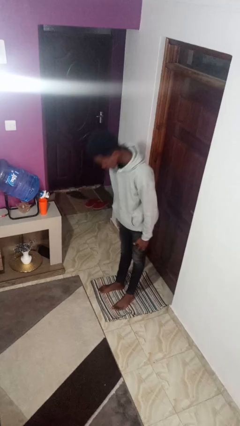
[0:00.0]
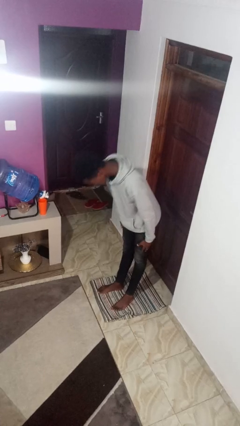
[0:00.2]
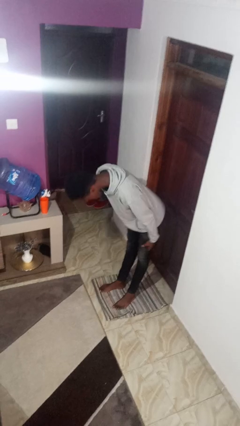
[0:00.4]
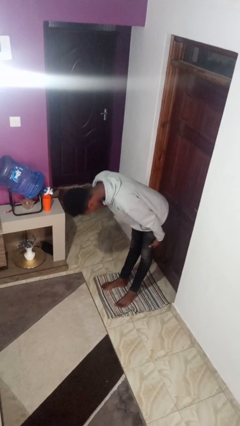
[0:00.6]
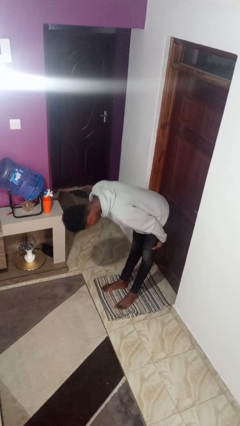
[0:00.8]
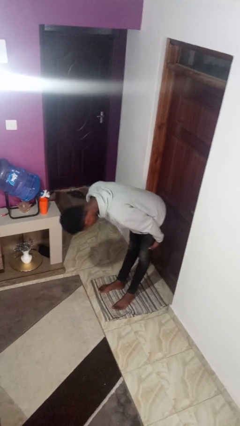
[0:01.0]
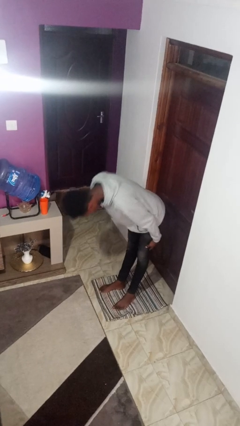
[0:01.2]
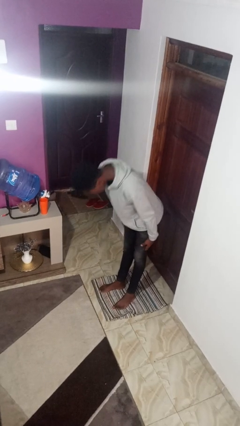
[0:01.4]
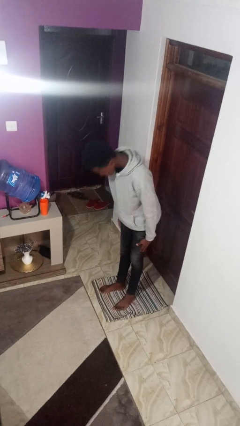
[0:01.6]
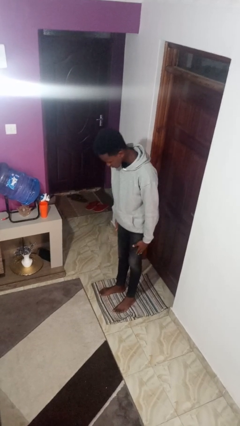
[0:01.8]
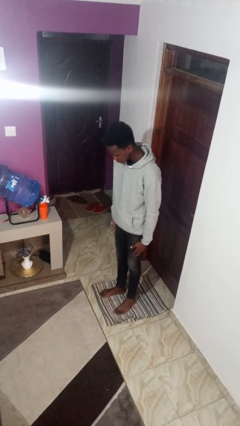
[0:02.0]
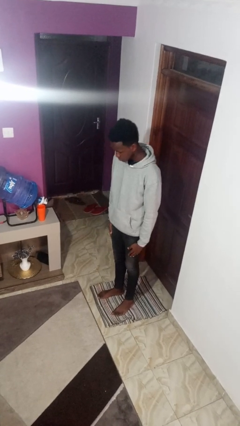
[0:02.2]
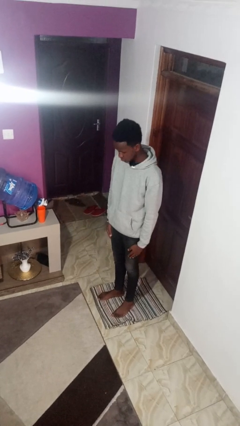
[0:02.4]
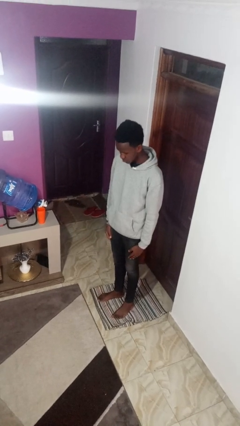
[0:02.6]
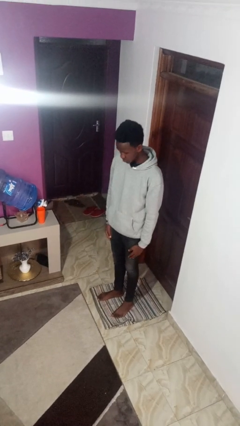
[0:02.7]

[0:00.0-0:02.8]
person bows

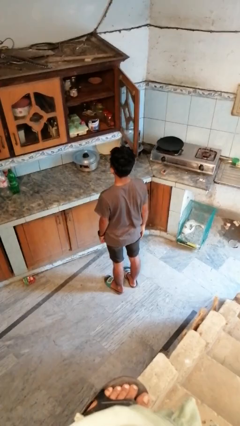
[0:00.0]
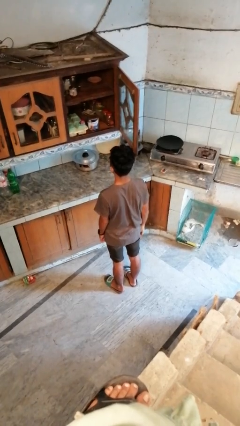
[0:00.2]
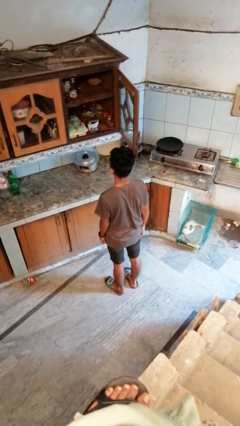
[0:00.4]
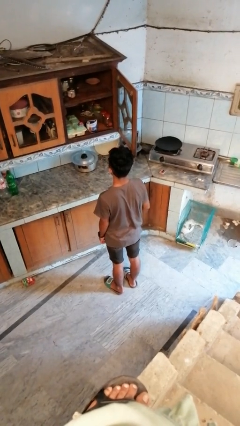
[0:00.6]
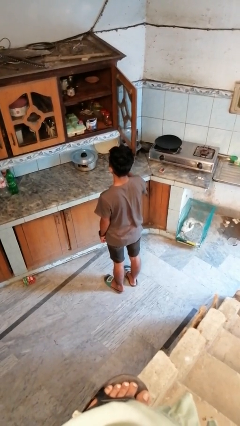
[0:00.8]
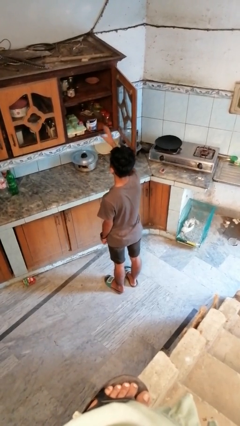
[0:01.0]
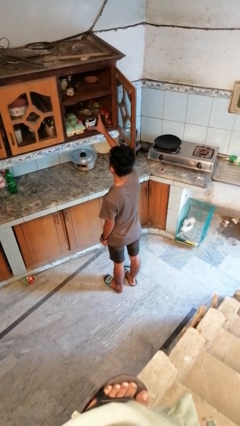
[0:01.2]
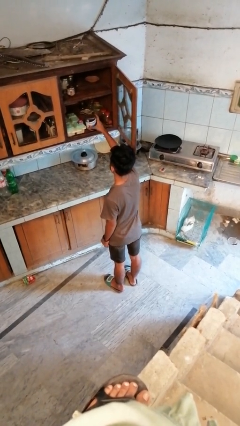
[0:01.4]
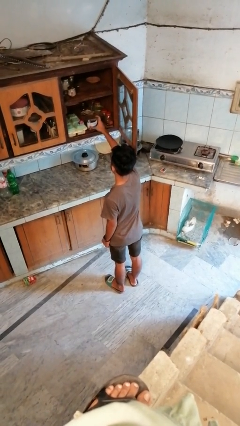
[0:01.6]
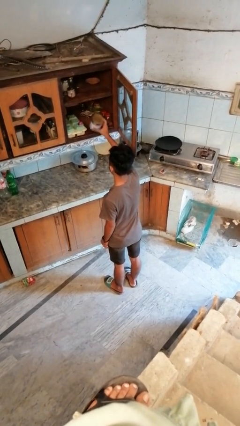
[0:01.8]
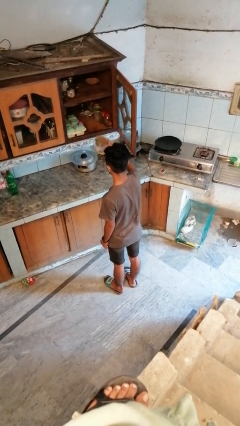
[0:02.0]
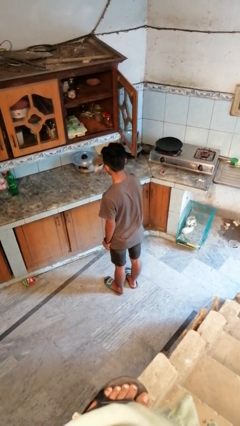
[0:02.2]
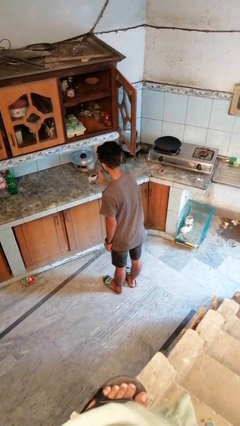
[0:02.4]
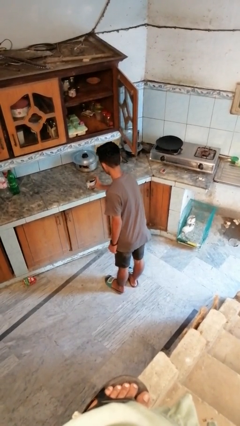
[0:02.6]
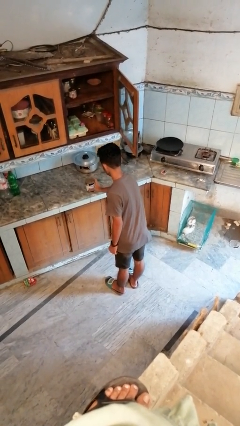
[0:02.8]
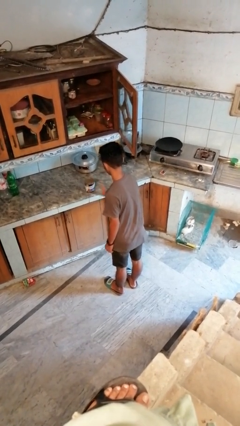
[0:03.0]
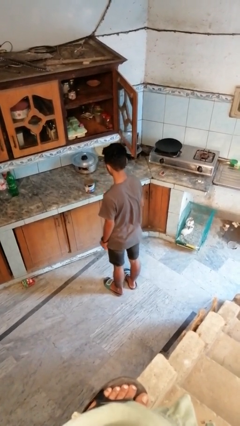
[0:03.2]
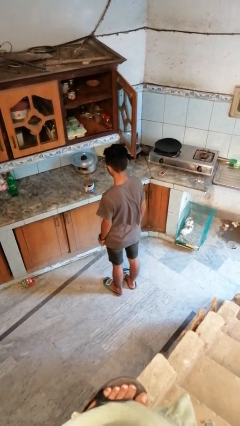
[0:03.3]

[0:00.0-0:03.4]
person takes object from cabinet

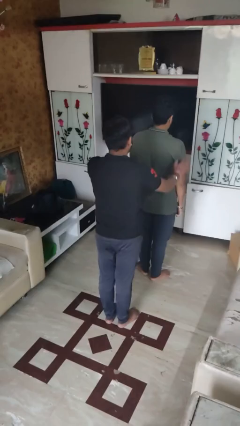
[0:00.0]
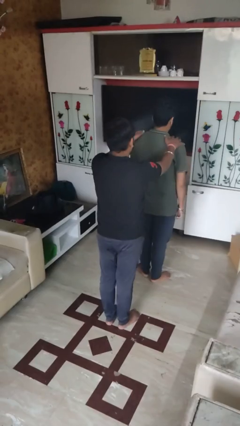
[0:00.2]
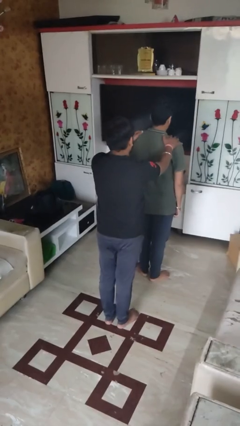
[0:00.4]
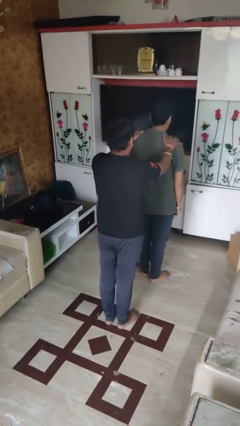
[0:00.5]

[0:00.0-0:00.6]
person grabs person by shoulder

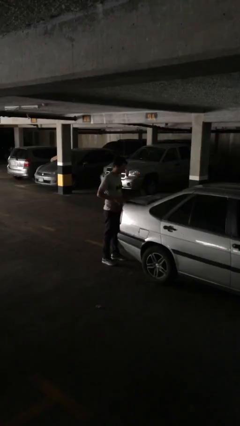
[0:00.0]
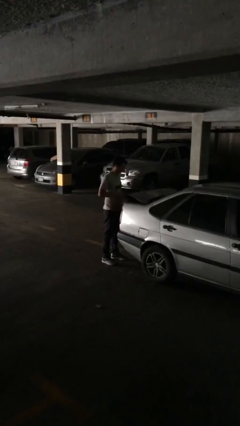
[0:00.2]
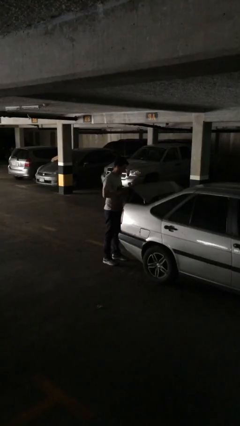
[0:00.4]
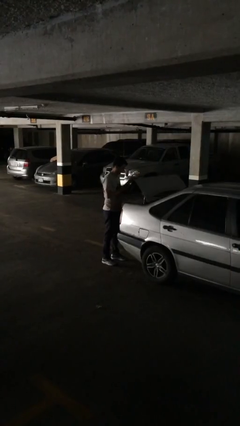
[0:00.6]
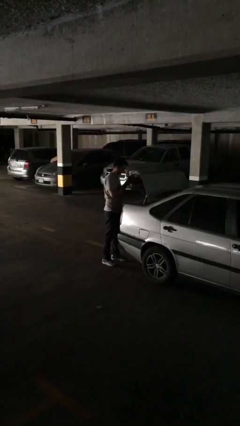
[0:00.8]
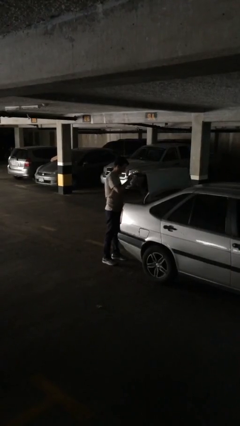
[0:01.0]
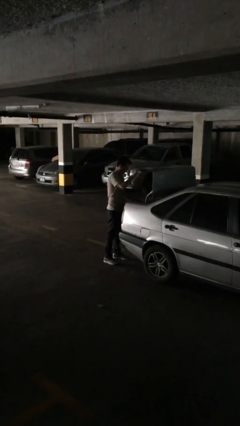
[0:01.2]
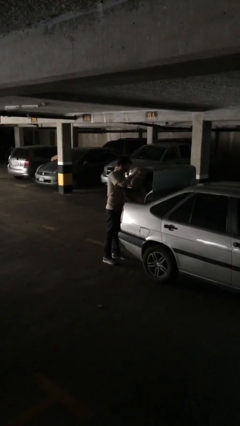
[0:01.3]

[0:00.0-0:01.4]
person opens car trunk

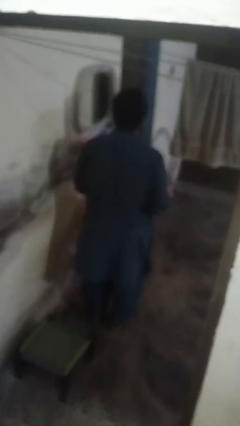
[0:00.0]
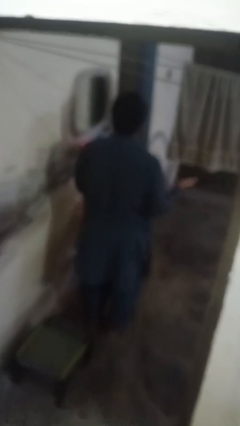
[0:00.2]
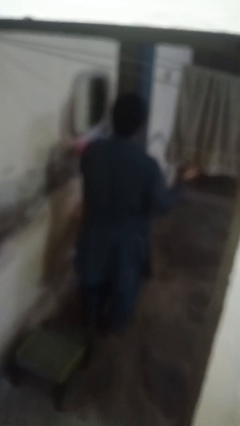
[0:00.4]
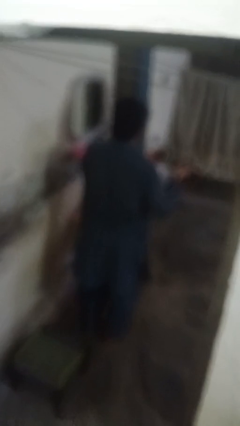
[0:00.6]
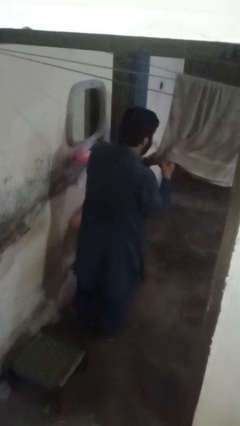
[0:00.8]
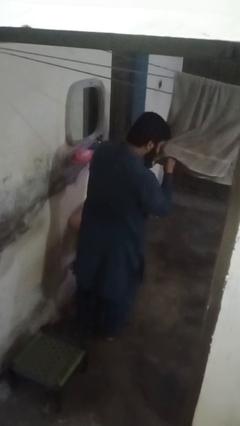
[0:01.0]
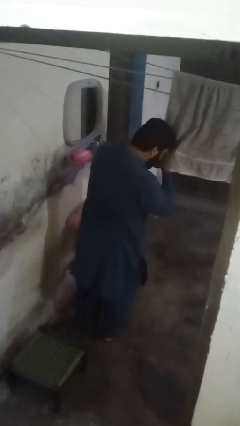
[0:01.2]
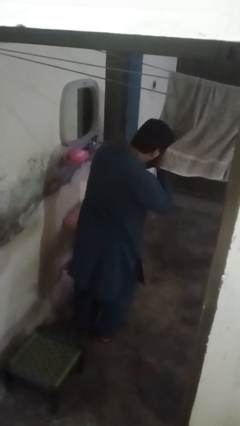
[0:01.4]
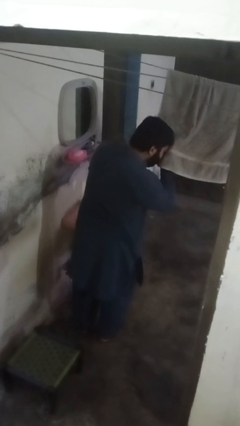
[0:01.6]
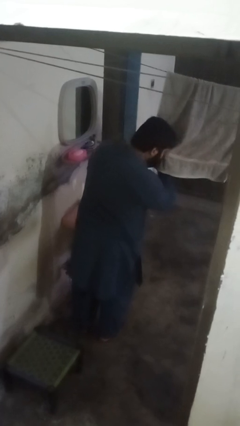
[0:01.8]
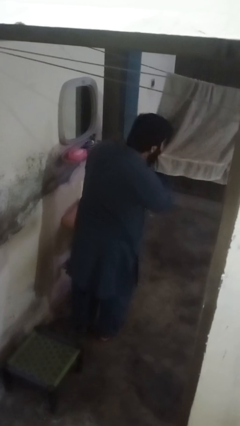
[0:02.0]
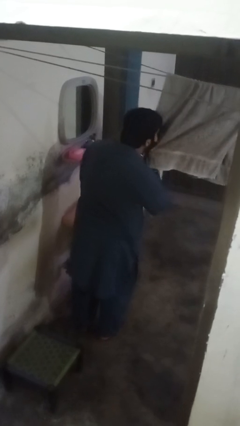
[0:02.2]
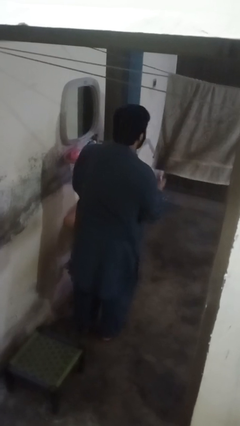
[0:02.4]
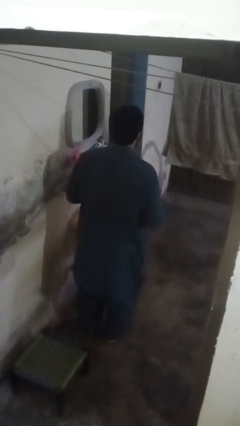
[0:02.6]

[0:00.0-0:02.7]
person dries face with towel

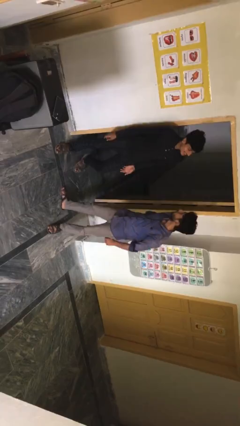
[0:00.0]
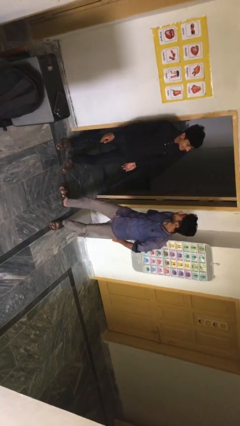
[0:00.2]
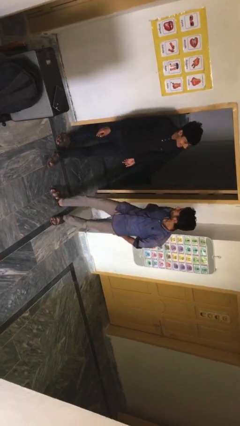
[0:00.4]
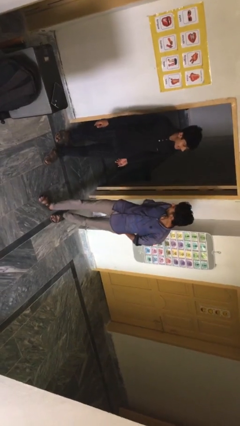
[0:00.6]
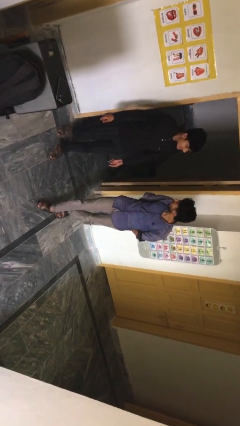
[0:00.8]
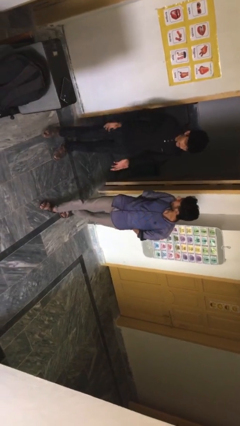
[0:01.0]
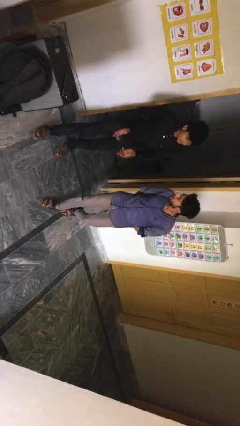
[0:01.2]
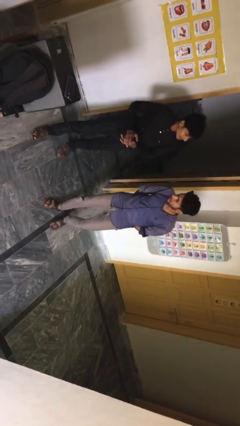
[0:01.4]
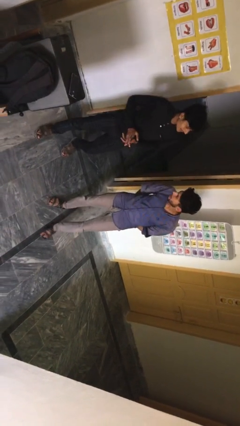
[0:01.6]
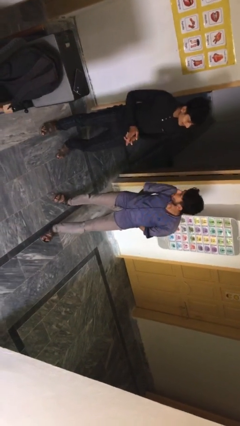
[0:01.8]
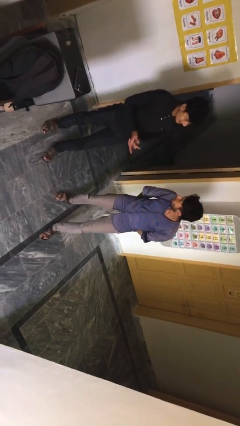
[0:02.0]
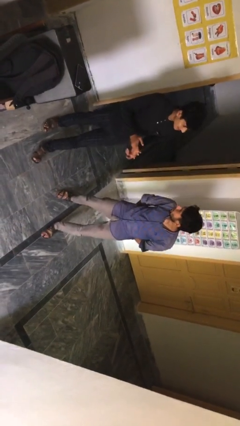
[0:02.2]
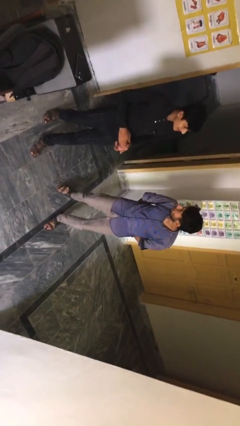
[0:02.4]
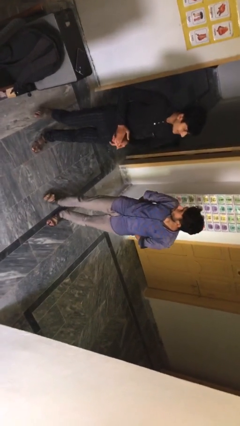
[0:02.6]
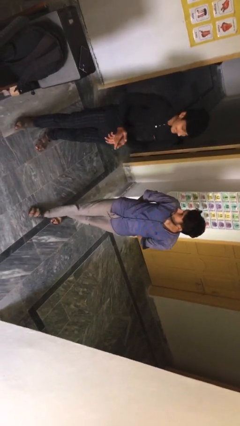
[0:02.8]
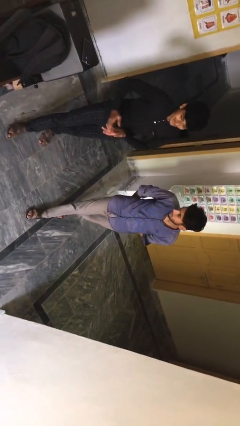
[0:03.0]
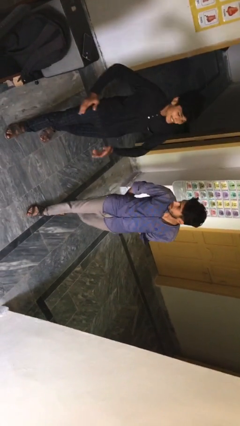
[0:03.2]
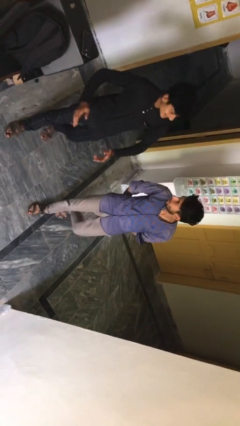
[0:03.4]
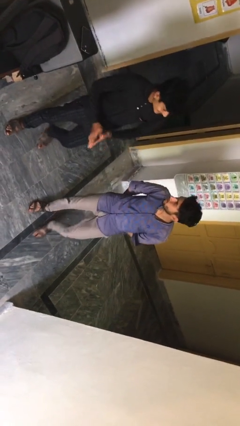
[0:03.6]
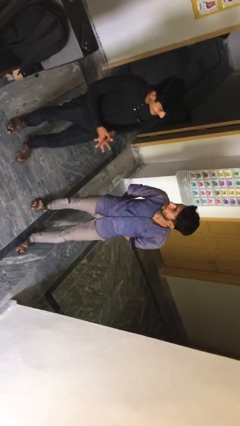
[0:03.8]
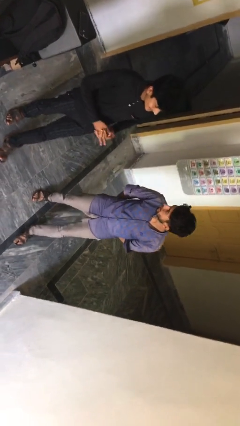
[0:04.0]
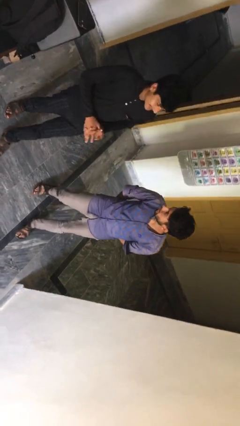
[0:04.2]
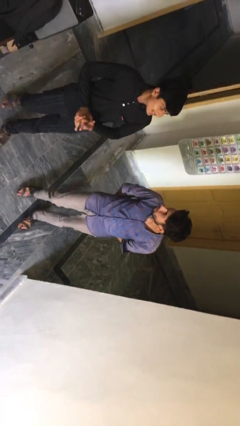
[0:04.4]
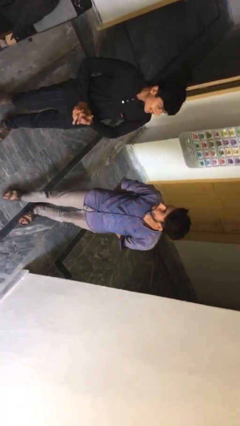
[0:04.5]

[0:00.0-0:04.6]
person talks to person

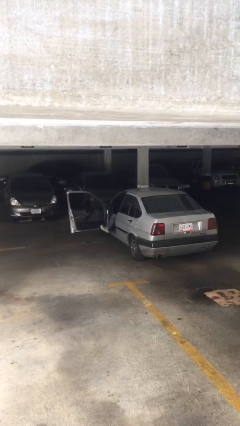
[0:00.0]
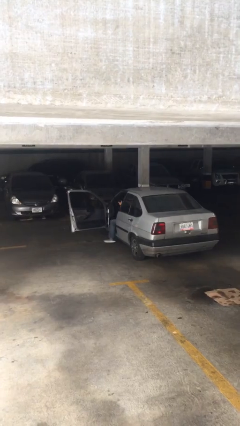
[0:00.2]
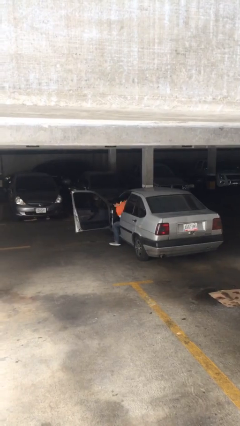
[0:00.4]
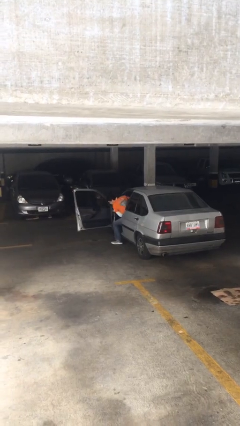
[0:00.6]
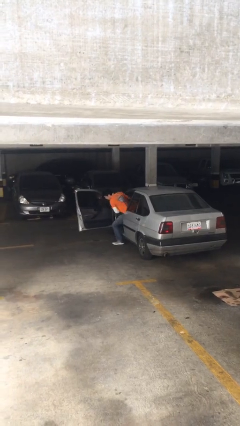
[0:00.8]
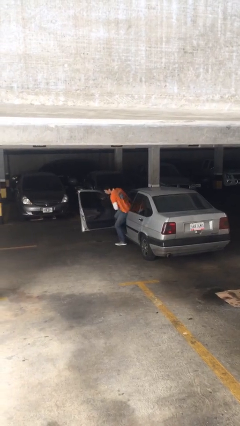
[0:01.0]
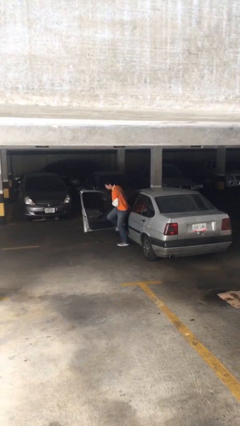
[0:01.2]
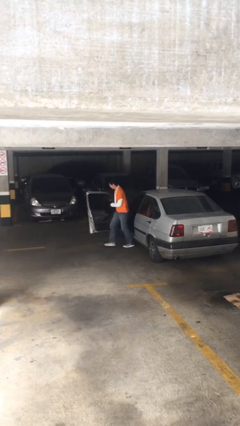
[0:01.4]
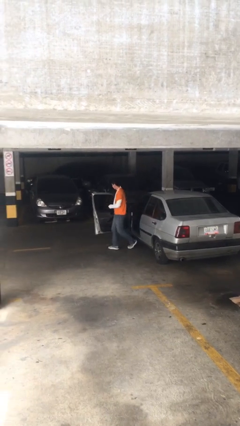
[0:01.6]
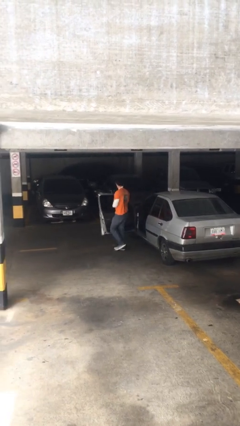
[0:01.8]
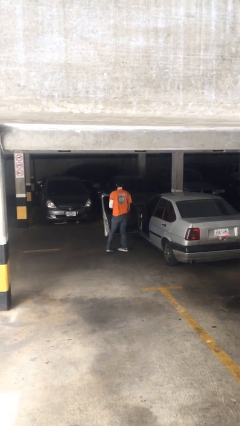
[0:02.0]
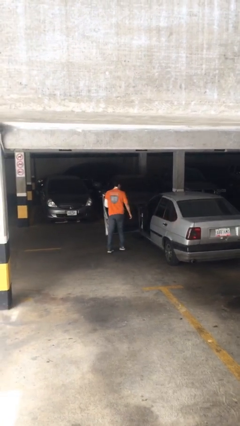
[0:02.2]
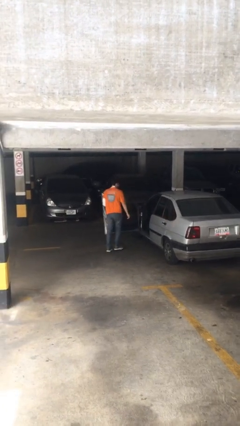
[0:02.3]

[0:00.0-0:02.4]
person exits car
